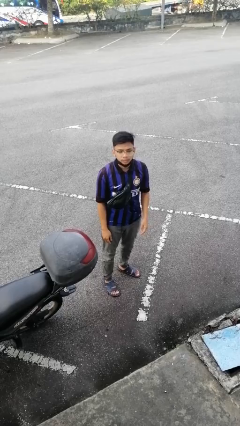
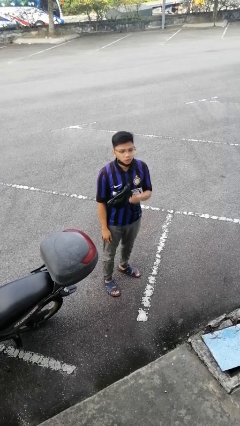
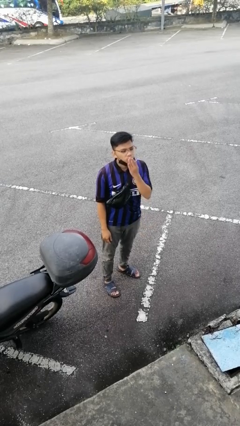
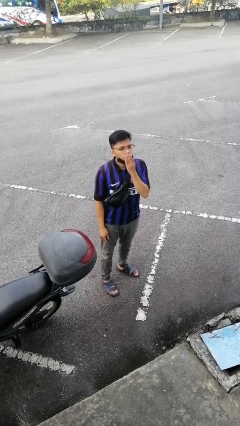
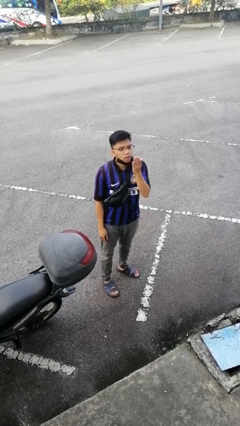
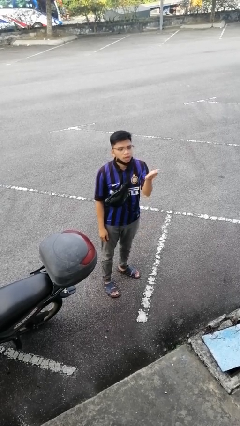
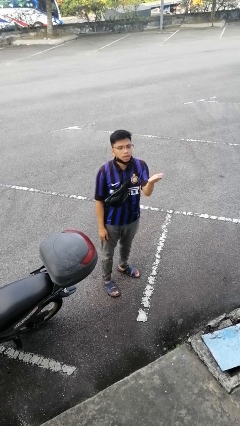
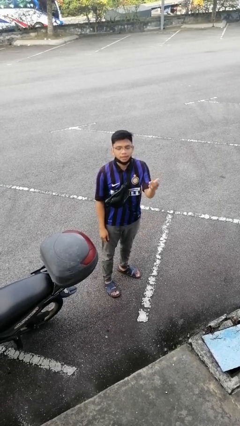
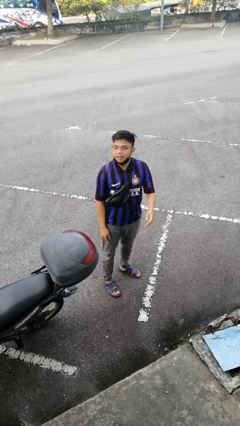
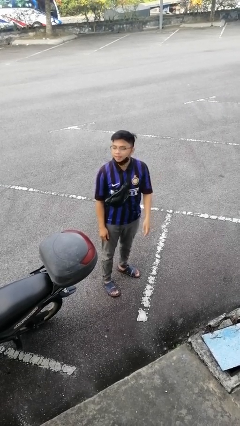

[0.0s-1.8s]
person gestures blow kiss

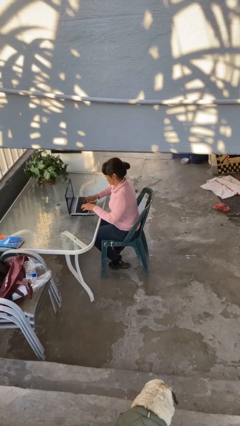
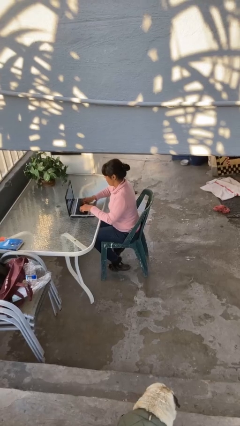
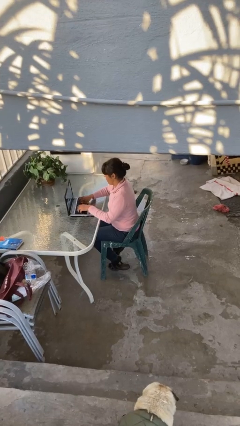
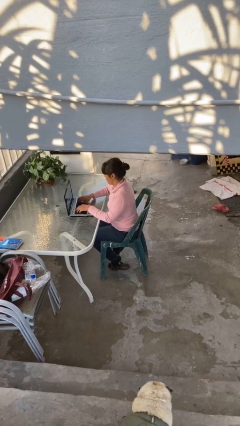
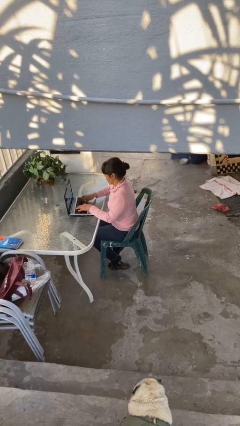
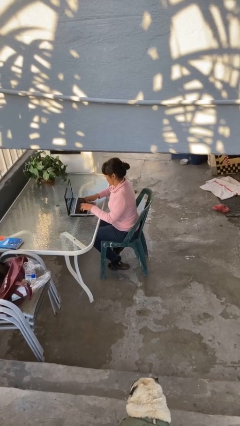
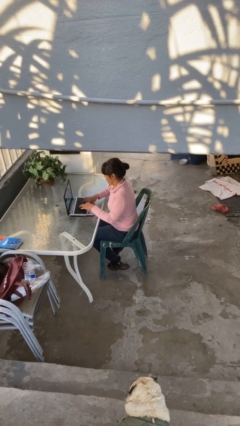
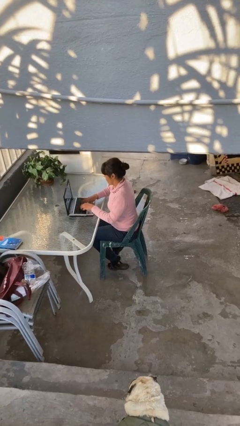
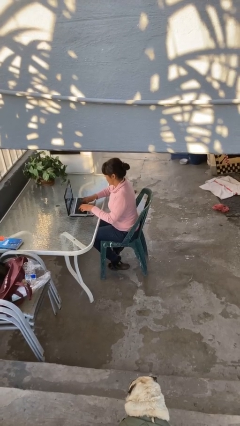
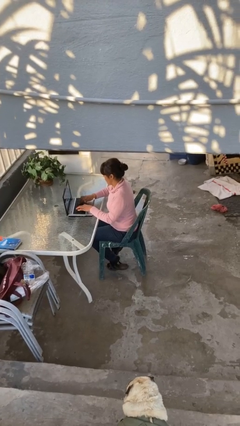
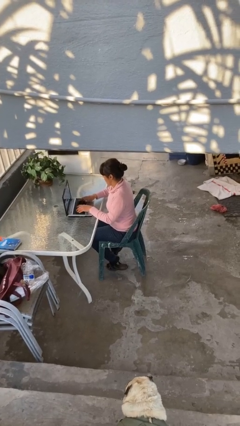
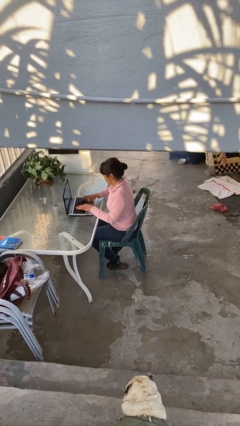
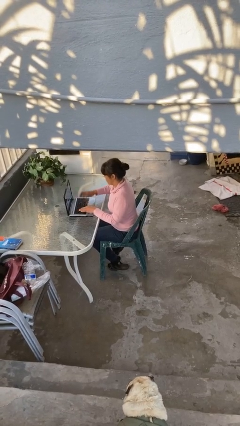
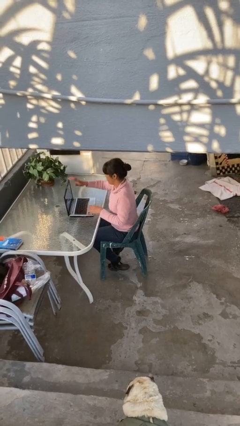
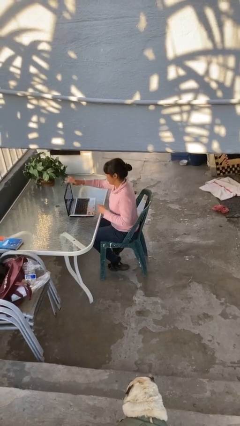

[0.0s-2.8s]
person interacts with laptop

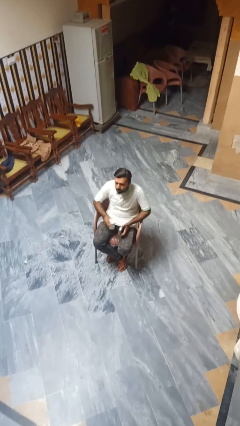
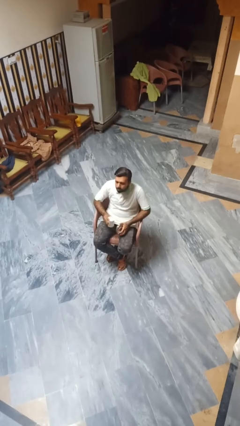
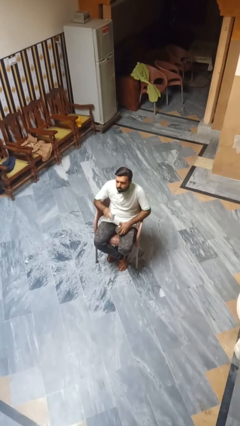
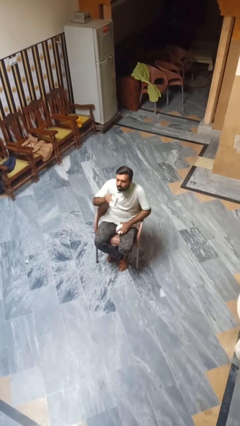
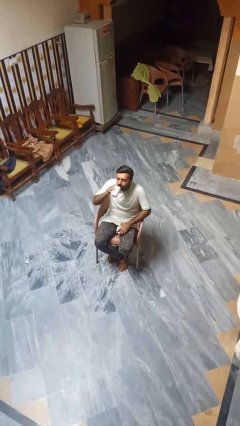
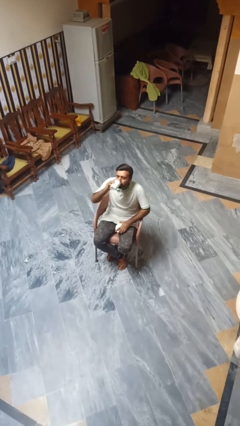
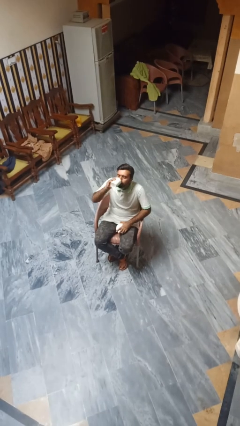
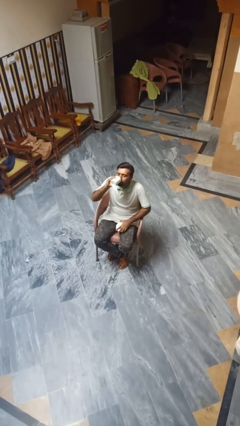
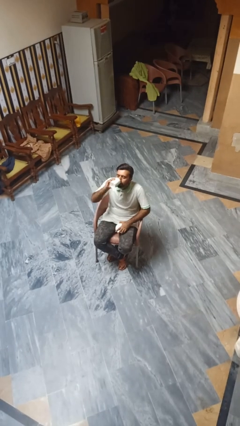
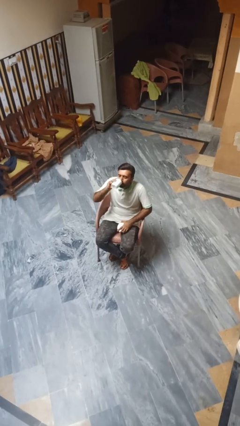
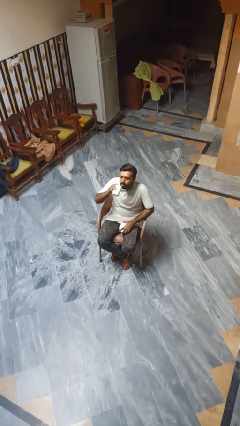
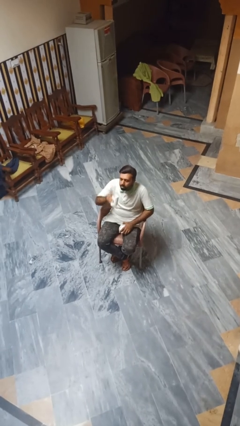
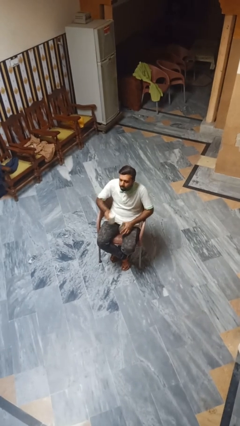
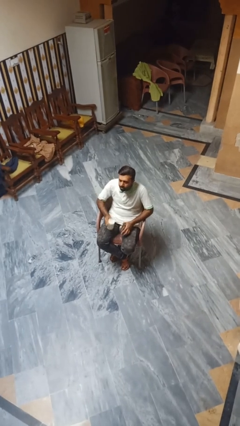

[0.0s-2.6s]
person drinks from beverage can

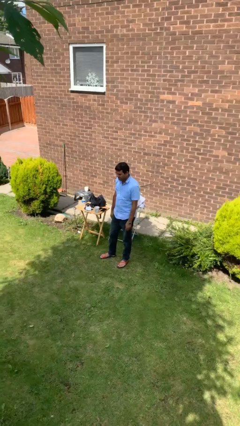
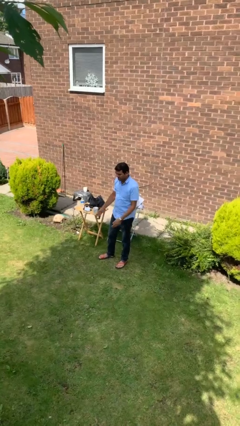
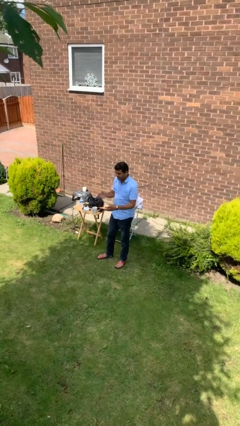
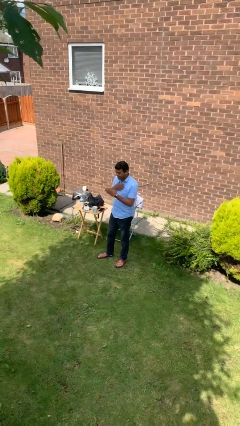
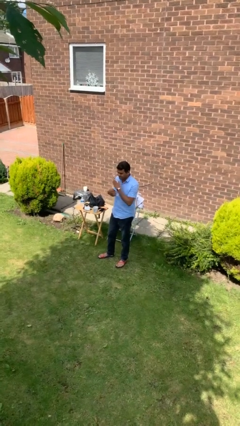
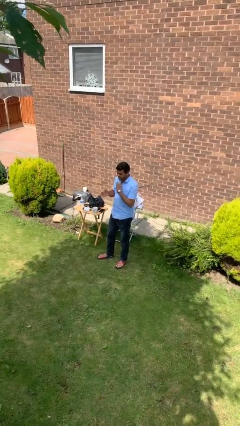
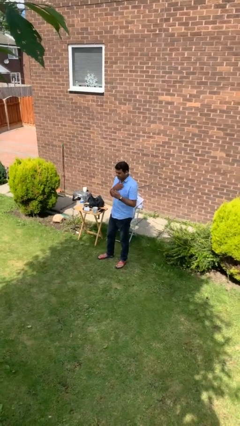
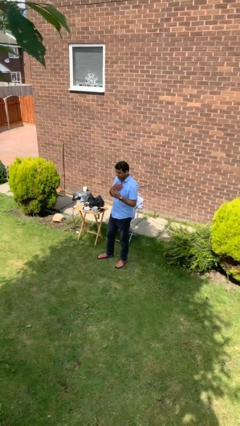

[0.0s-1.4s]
person drums on chest

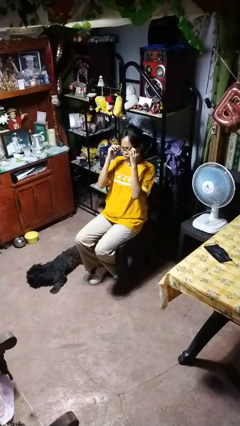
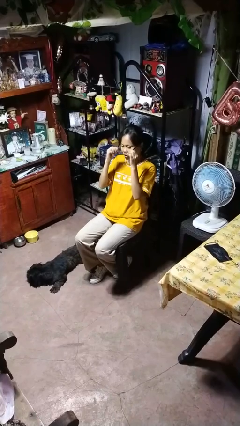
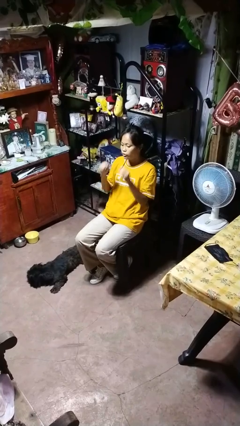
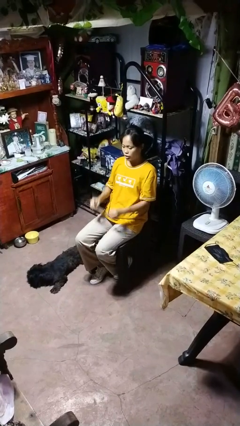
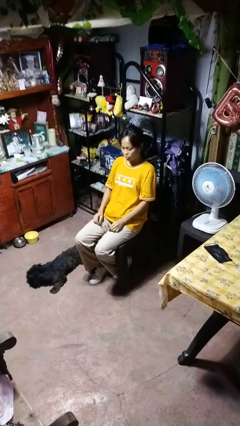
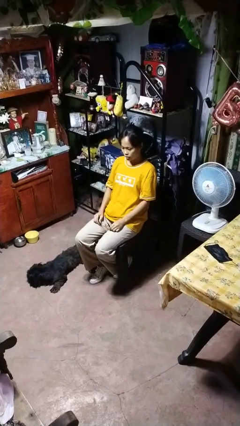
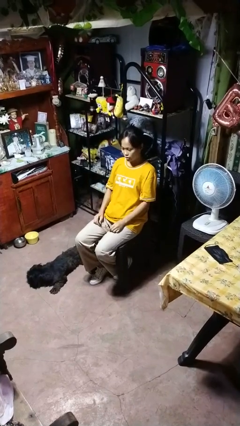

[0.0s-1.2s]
person takes off glasses

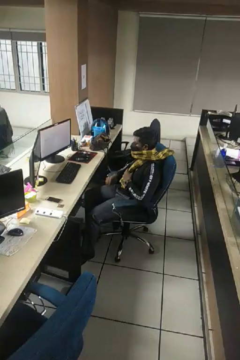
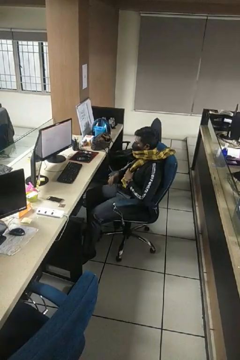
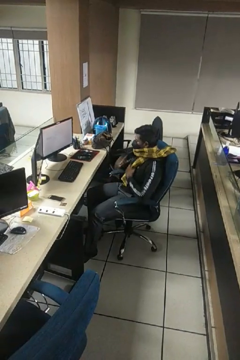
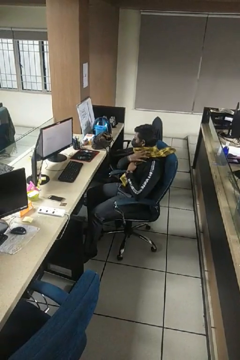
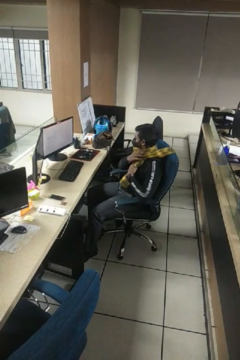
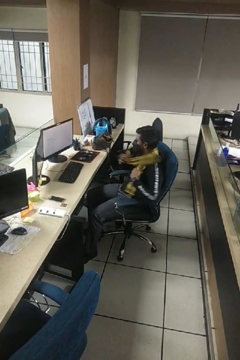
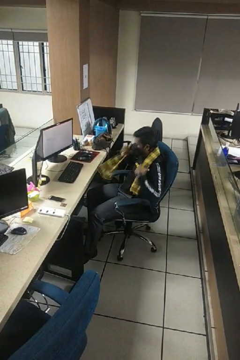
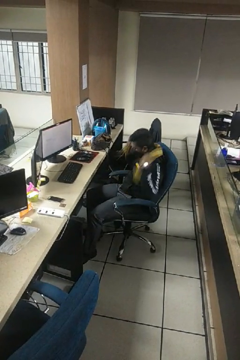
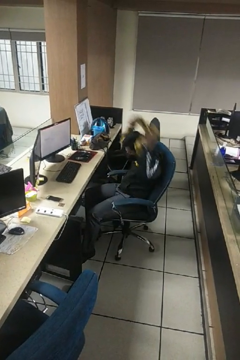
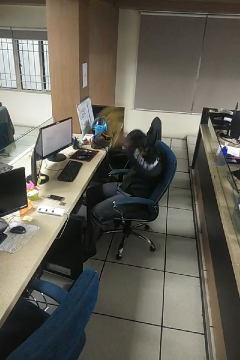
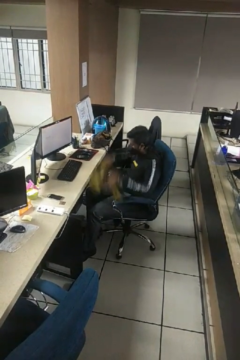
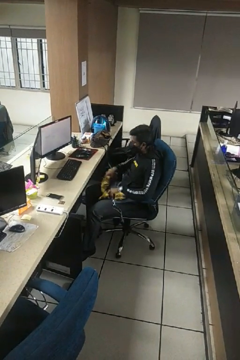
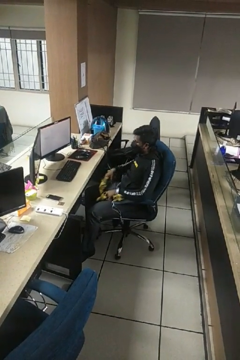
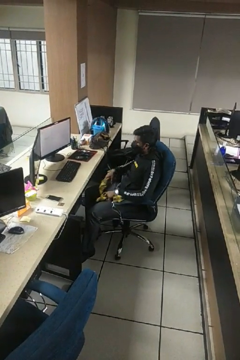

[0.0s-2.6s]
person takes off scarf

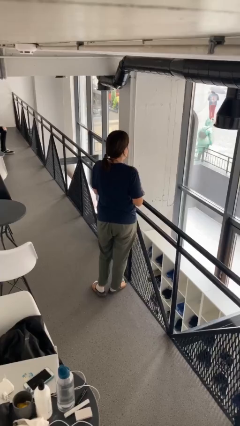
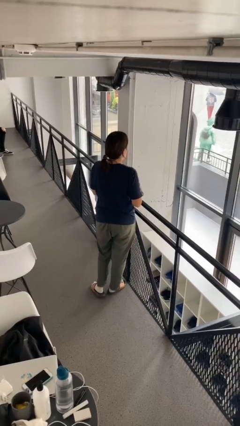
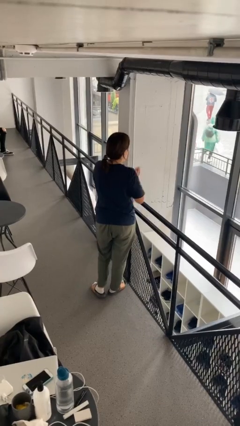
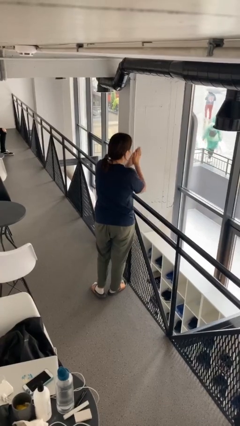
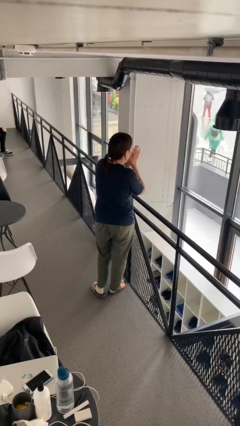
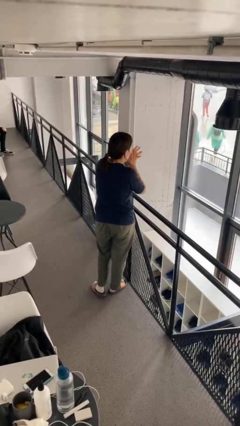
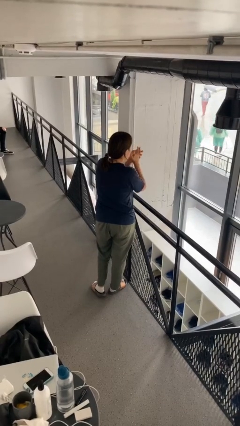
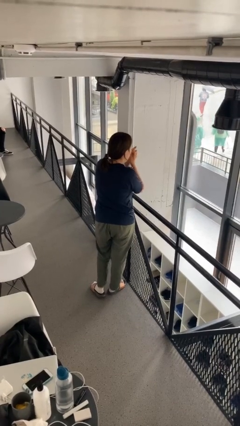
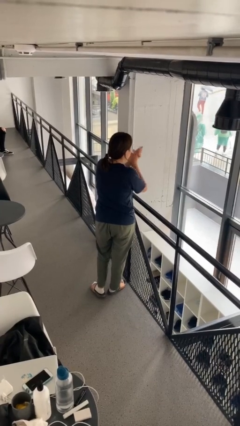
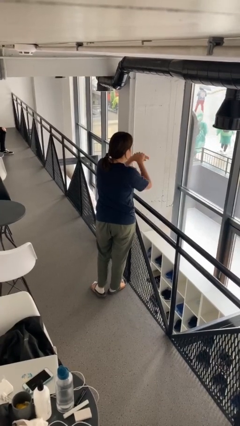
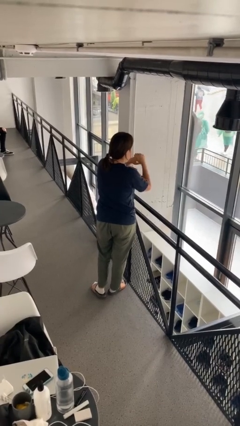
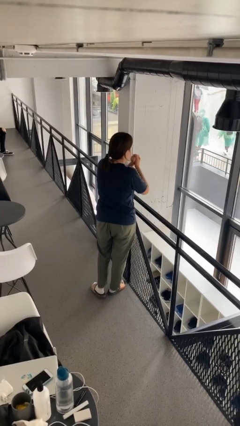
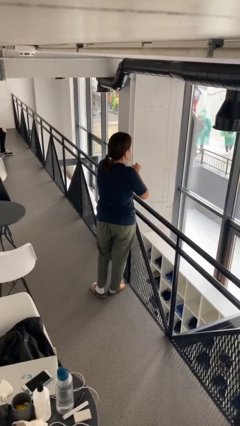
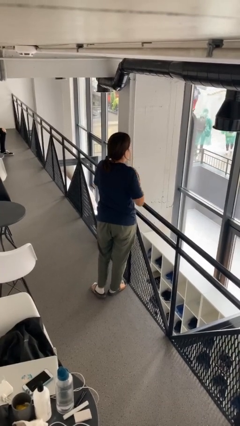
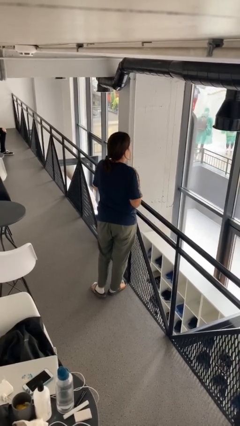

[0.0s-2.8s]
person blows into hands

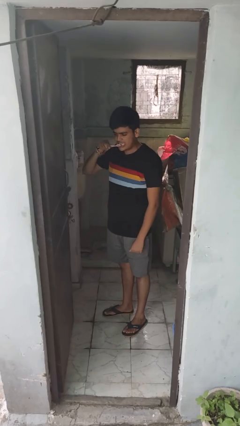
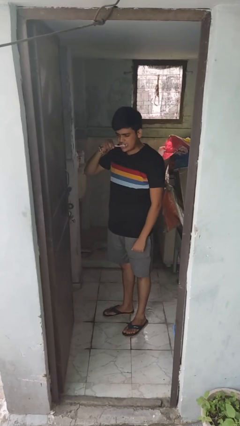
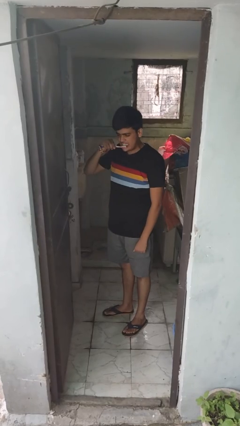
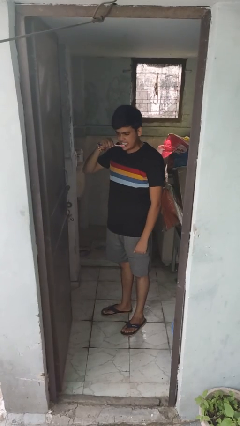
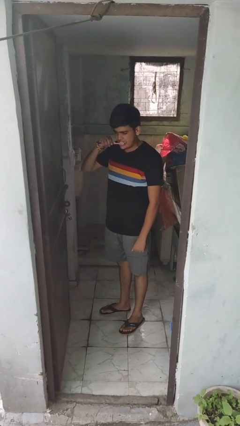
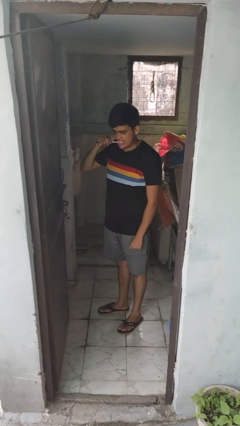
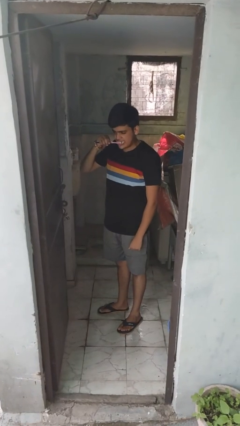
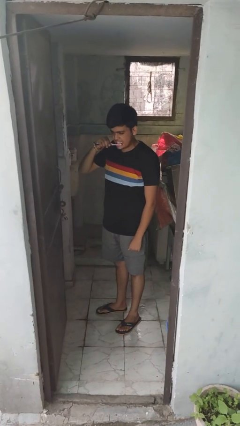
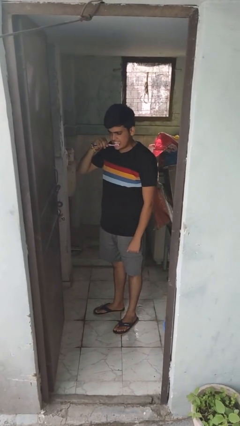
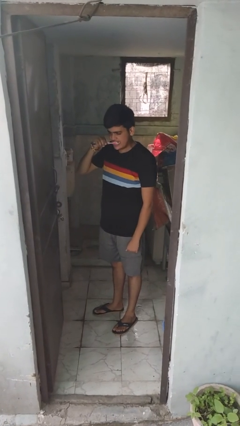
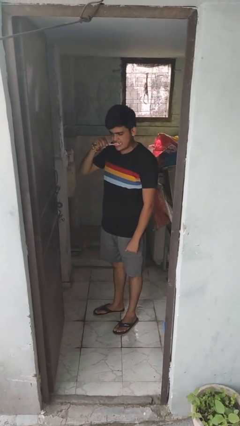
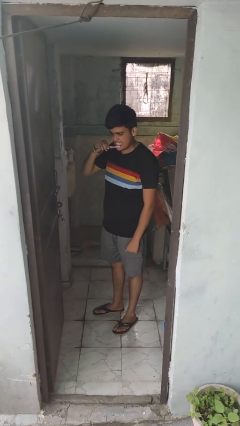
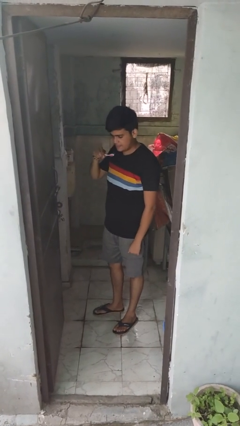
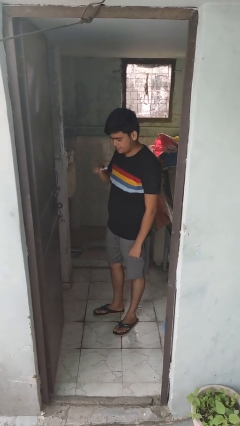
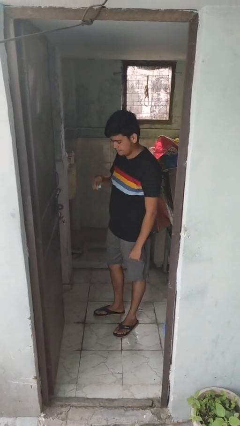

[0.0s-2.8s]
person brushes teeth
